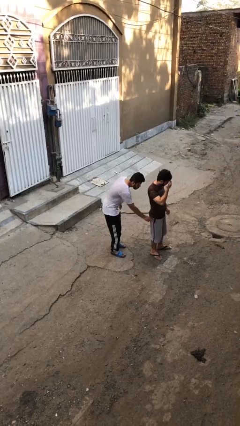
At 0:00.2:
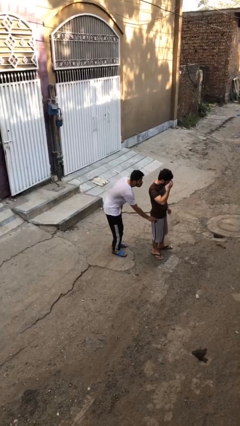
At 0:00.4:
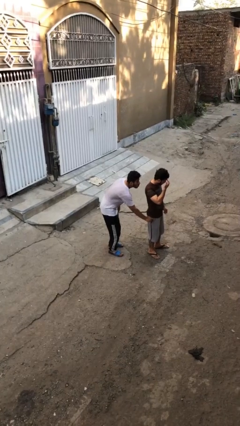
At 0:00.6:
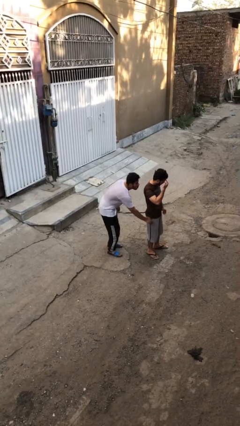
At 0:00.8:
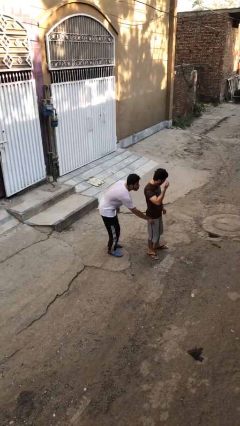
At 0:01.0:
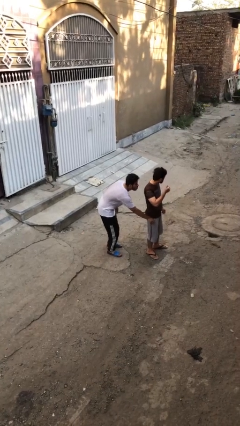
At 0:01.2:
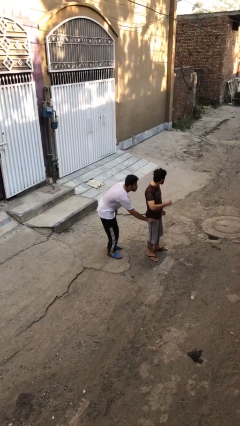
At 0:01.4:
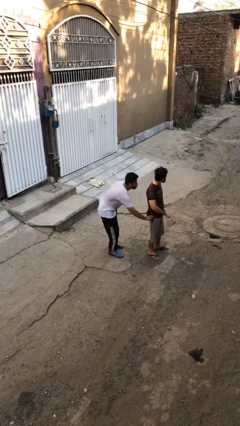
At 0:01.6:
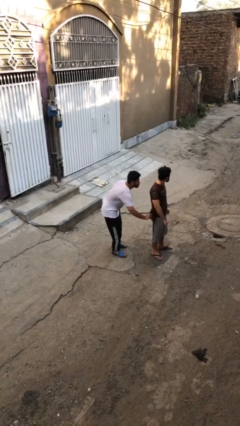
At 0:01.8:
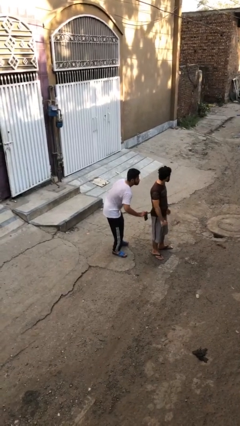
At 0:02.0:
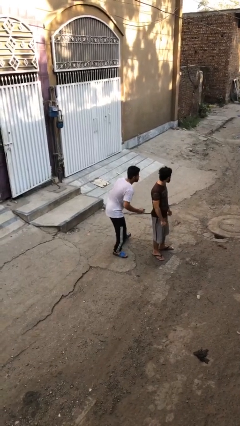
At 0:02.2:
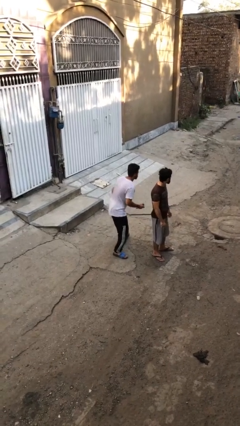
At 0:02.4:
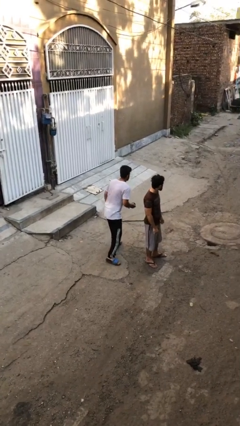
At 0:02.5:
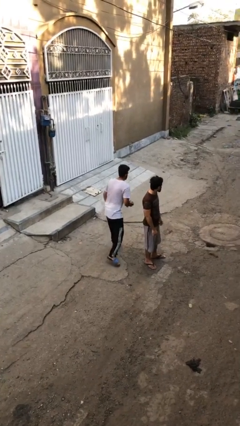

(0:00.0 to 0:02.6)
person steals object from person

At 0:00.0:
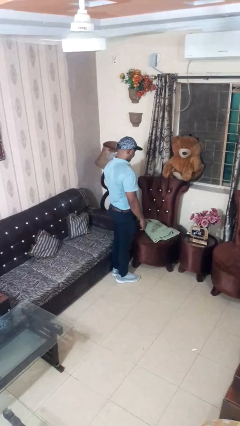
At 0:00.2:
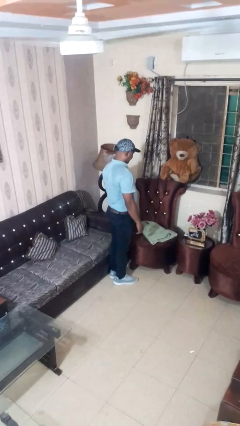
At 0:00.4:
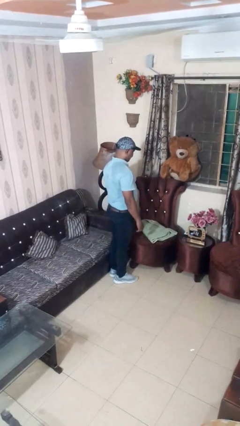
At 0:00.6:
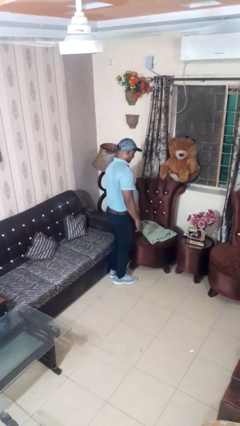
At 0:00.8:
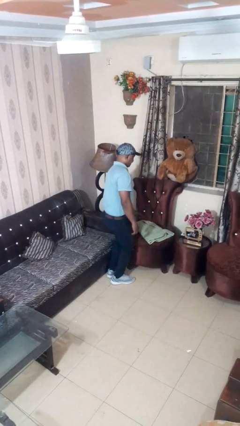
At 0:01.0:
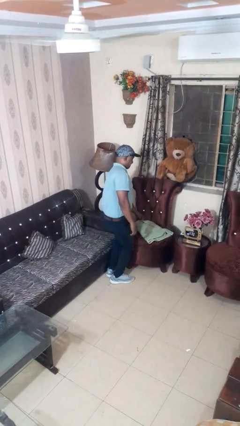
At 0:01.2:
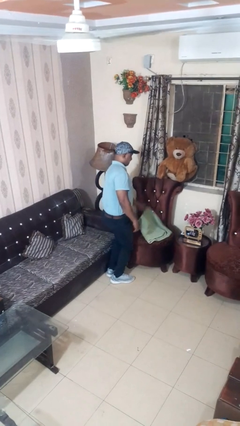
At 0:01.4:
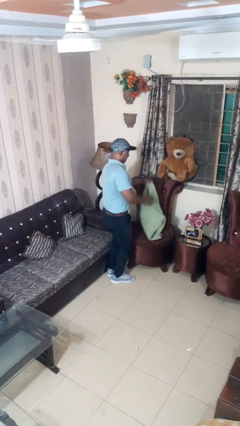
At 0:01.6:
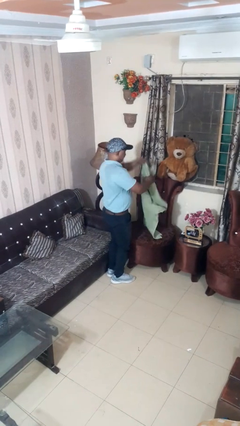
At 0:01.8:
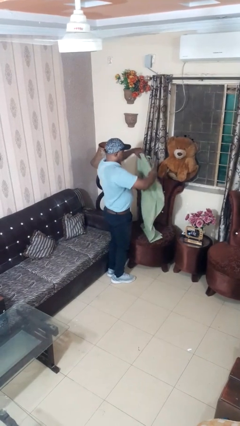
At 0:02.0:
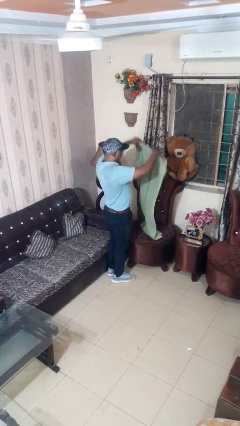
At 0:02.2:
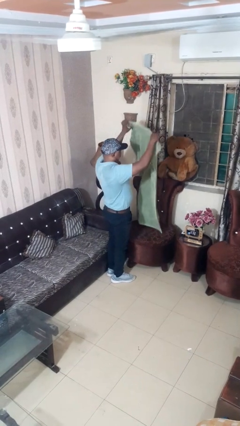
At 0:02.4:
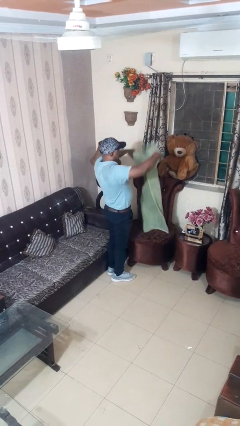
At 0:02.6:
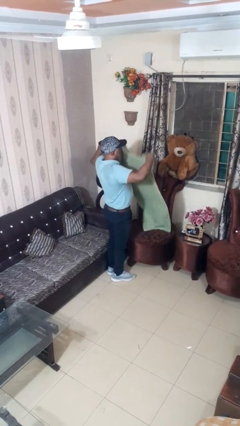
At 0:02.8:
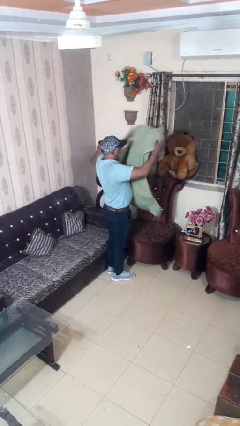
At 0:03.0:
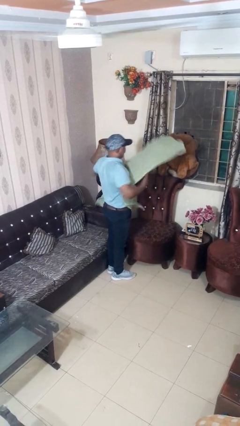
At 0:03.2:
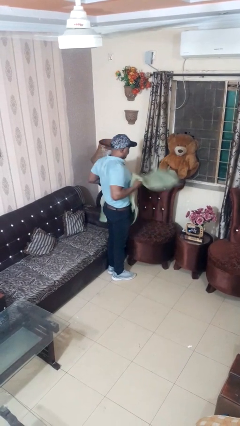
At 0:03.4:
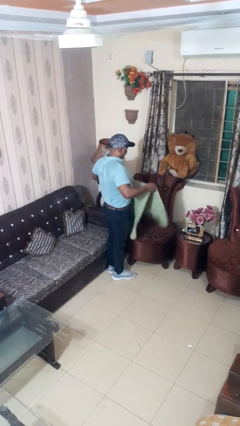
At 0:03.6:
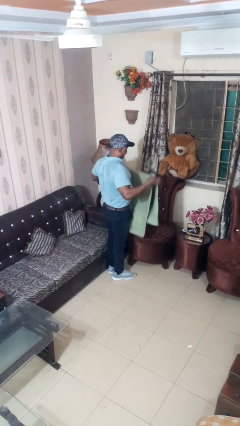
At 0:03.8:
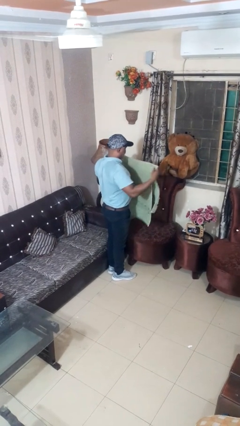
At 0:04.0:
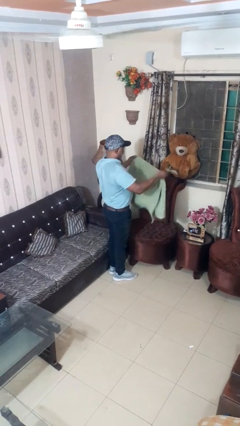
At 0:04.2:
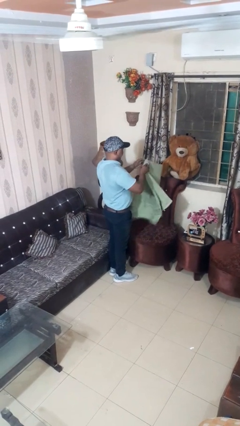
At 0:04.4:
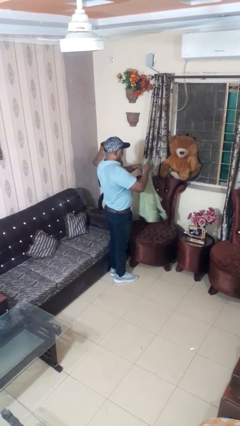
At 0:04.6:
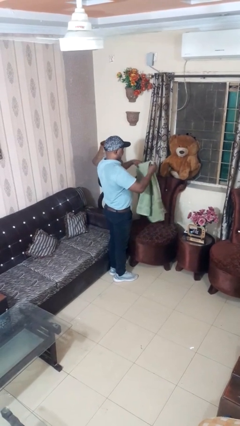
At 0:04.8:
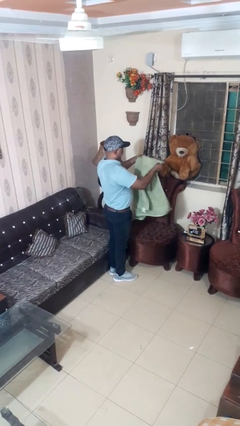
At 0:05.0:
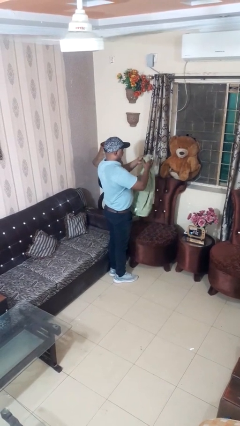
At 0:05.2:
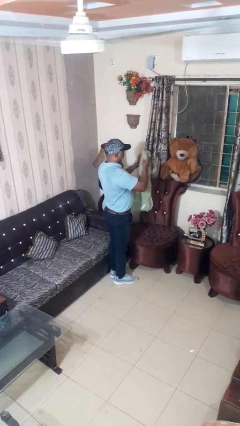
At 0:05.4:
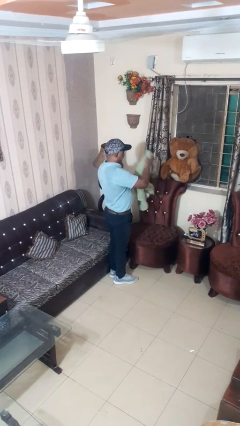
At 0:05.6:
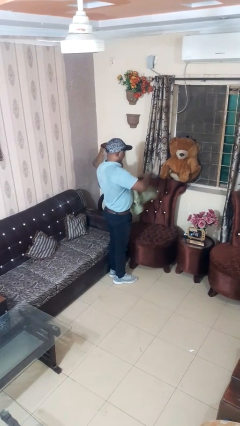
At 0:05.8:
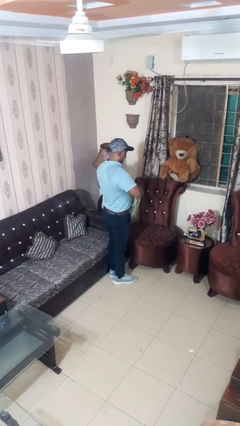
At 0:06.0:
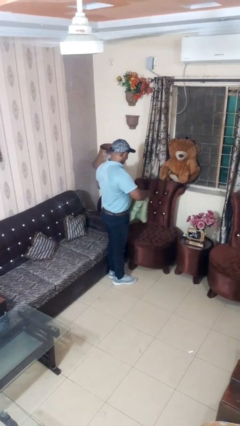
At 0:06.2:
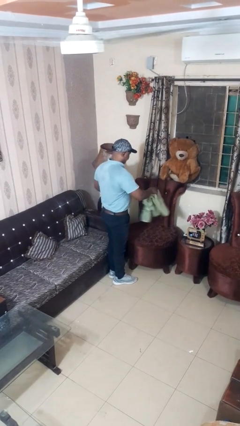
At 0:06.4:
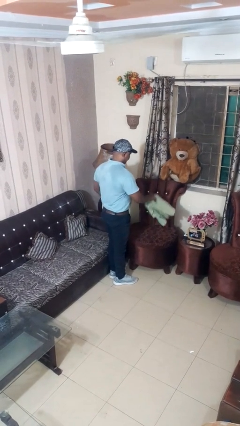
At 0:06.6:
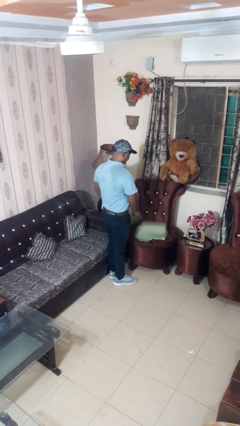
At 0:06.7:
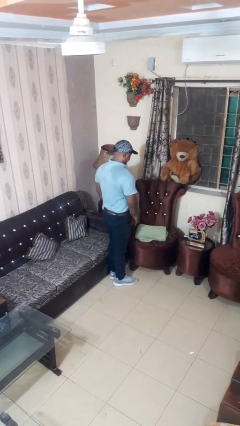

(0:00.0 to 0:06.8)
person folds towel

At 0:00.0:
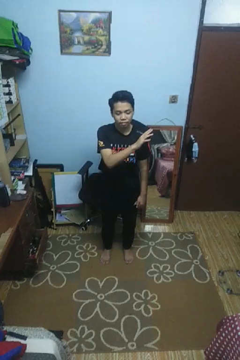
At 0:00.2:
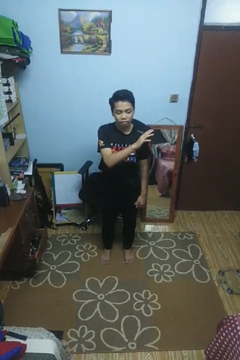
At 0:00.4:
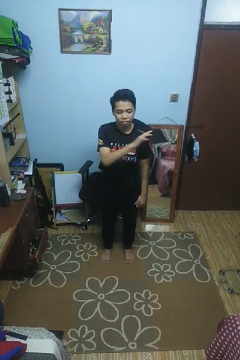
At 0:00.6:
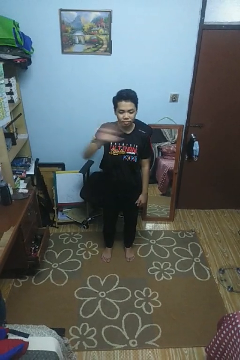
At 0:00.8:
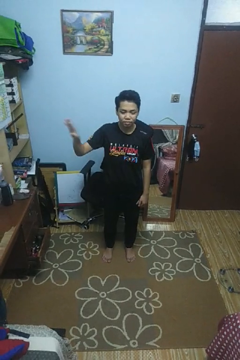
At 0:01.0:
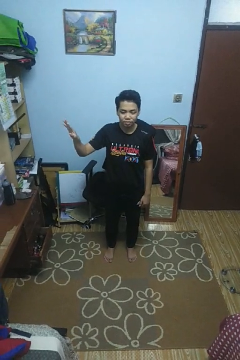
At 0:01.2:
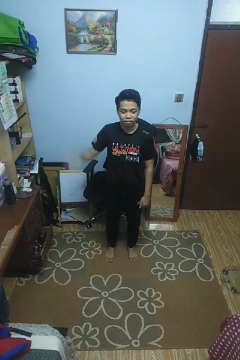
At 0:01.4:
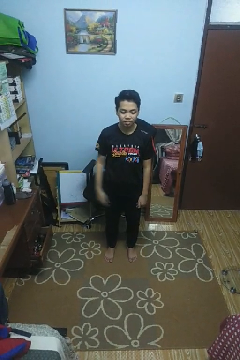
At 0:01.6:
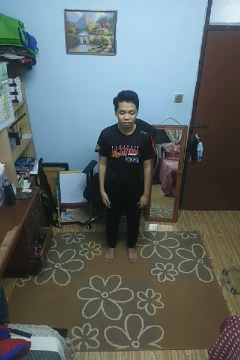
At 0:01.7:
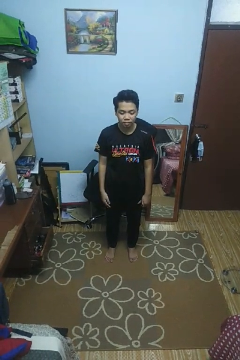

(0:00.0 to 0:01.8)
person gestures swipe right

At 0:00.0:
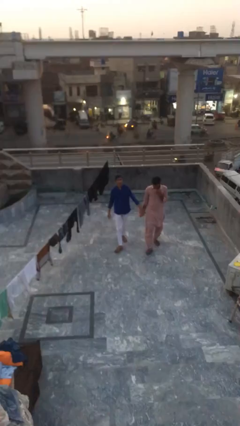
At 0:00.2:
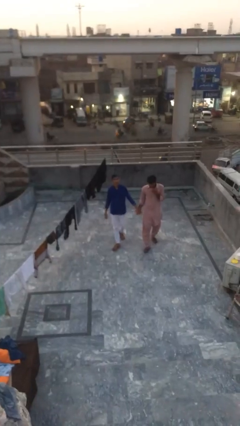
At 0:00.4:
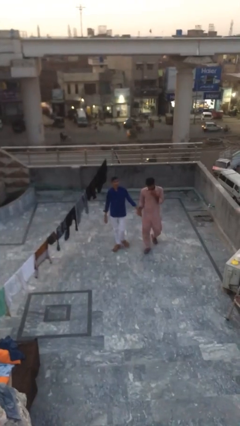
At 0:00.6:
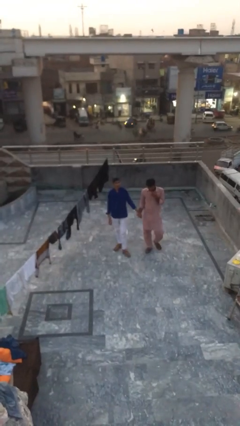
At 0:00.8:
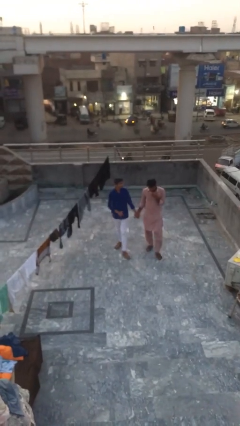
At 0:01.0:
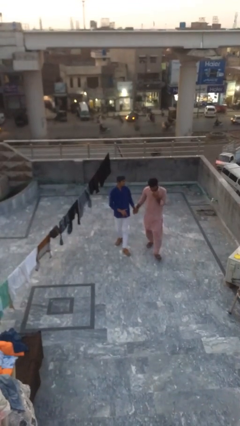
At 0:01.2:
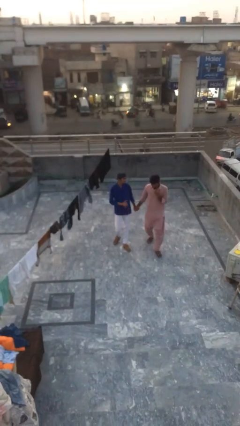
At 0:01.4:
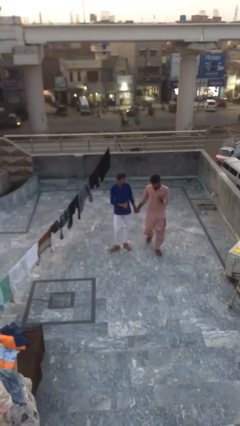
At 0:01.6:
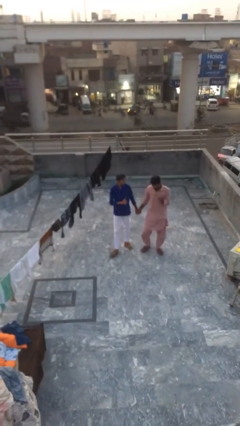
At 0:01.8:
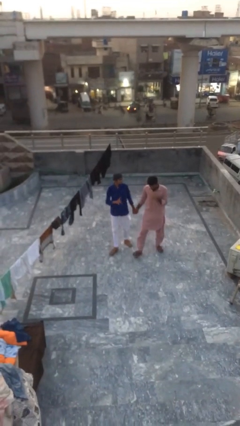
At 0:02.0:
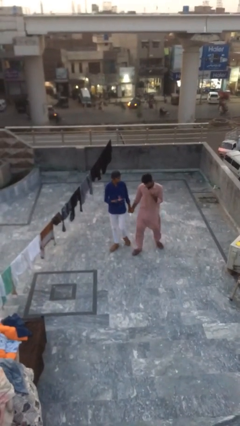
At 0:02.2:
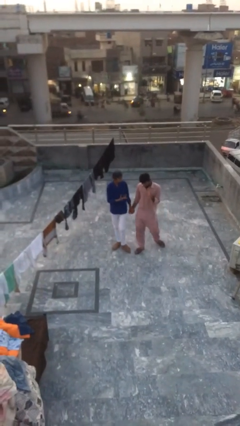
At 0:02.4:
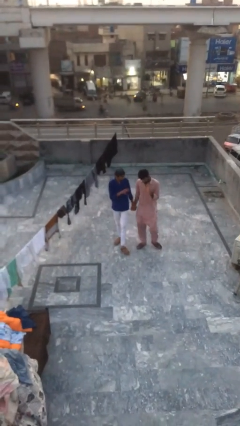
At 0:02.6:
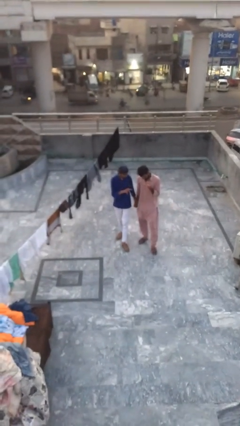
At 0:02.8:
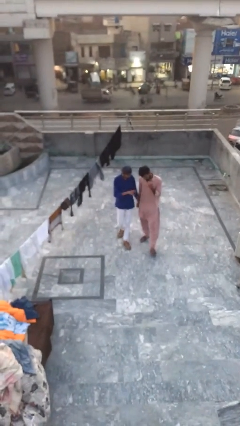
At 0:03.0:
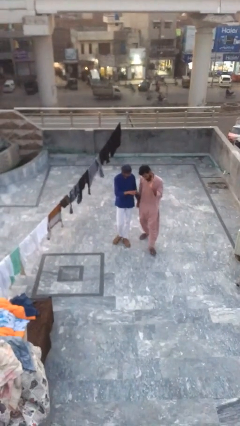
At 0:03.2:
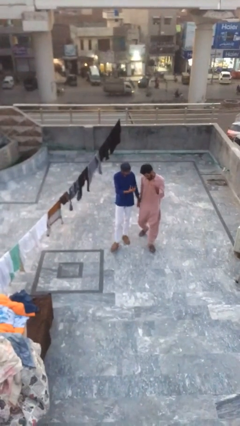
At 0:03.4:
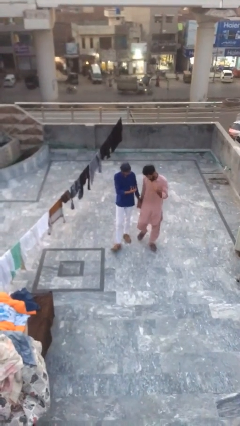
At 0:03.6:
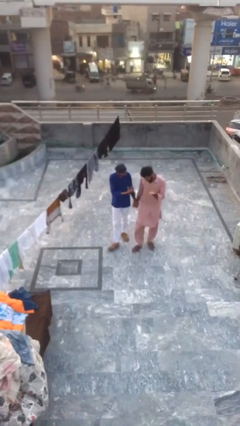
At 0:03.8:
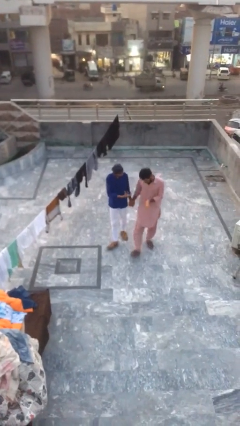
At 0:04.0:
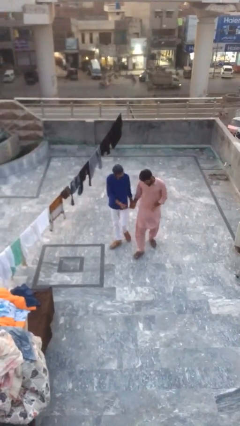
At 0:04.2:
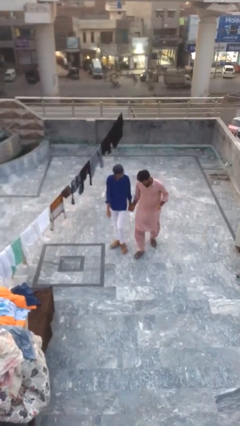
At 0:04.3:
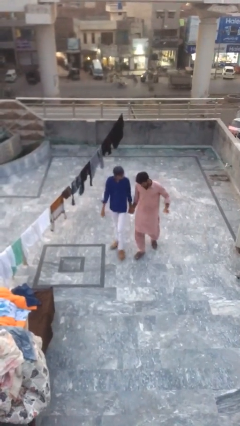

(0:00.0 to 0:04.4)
person holds hand

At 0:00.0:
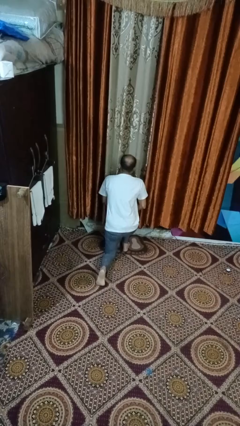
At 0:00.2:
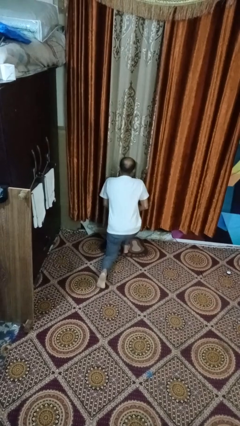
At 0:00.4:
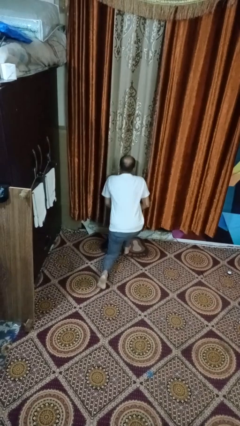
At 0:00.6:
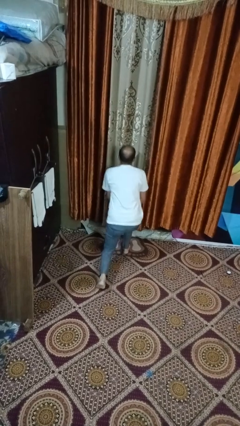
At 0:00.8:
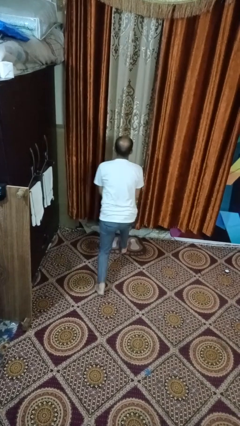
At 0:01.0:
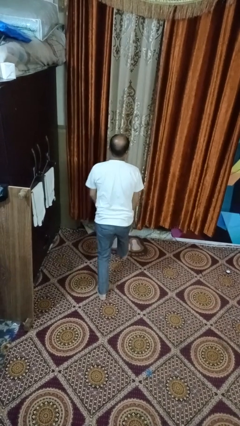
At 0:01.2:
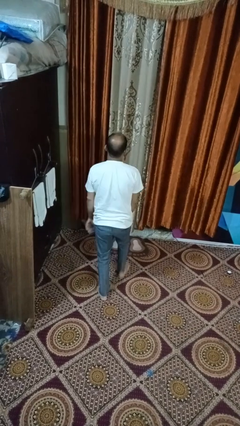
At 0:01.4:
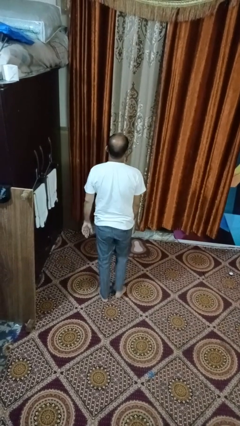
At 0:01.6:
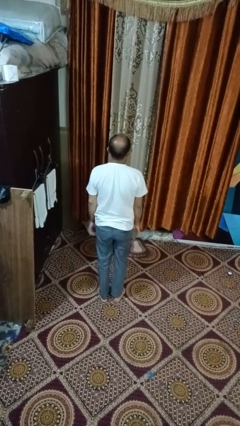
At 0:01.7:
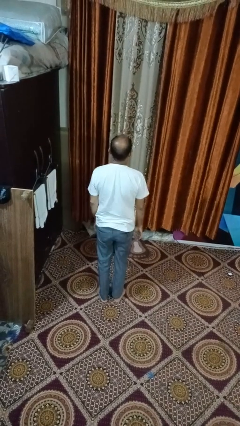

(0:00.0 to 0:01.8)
person stands up from floor
